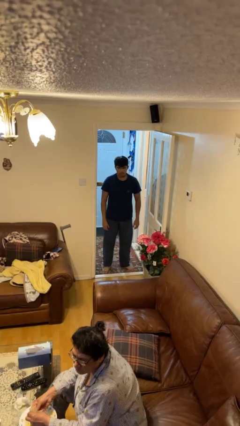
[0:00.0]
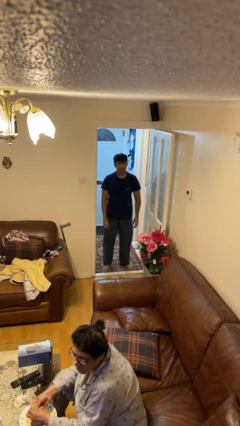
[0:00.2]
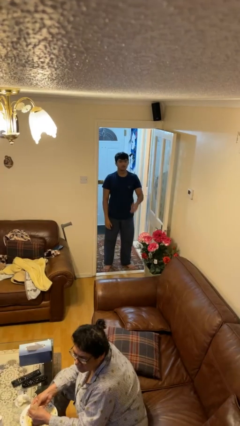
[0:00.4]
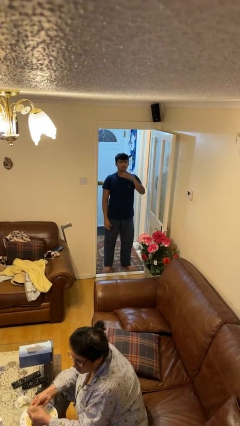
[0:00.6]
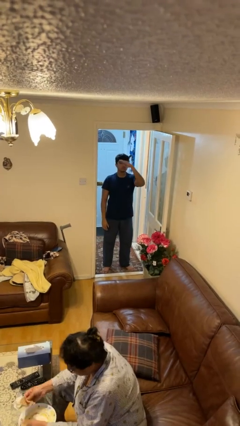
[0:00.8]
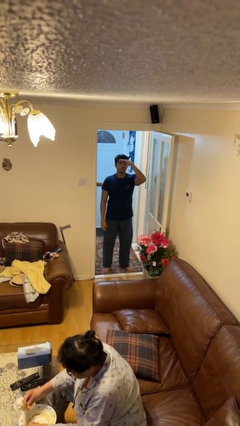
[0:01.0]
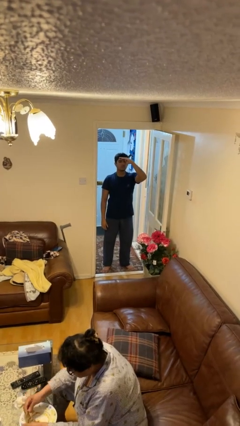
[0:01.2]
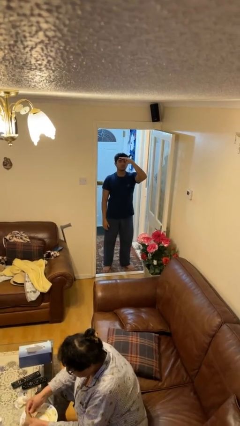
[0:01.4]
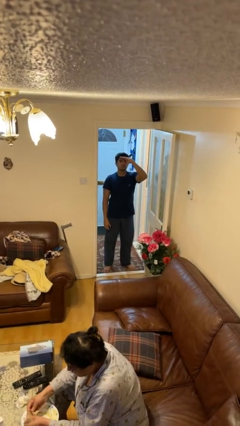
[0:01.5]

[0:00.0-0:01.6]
person salutes

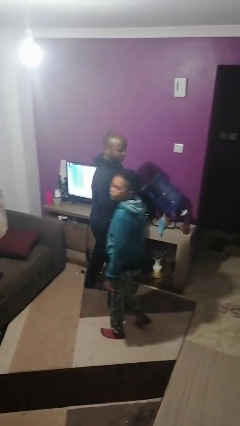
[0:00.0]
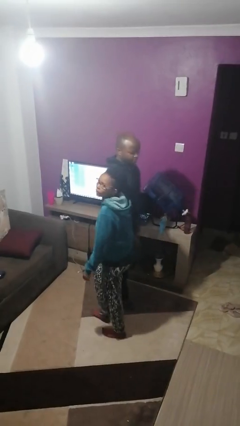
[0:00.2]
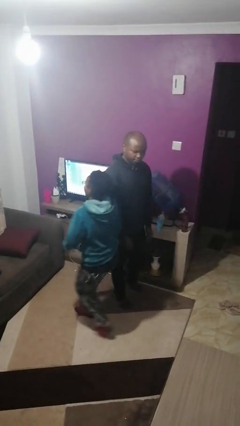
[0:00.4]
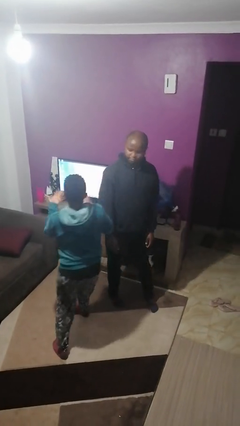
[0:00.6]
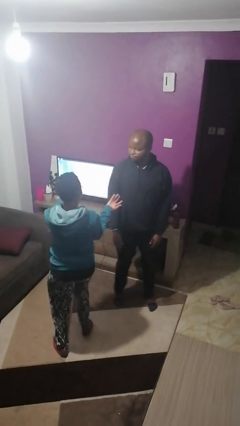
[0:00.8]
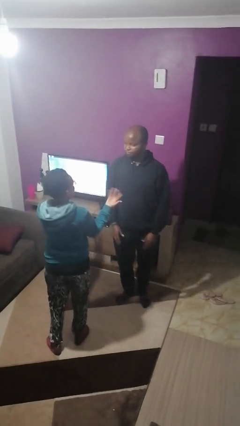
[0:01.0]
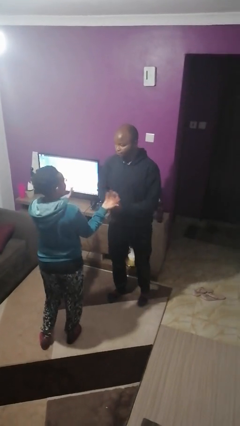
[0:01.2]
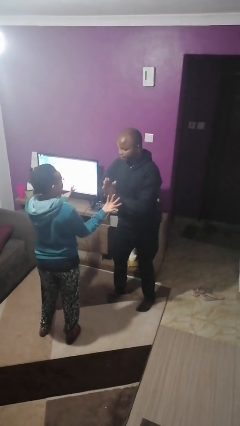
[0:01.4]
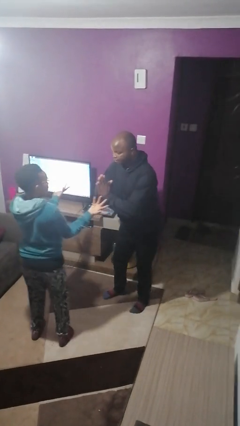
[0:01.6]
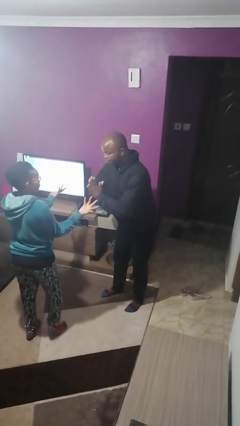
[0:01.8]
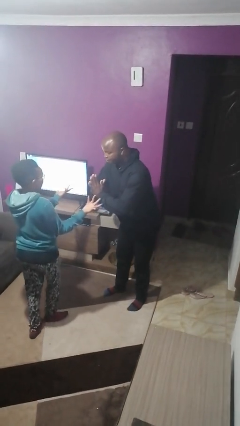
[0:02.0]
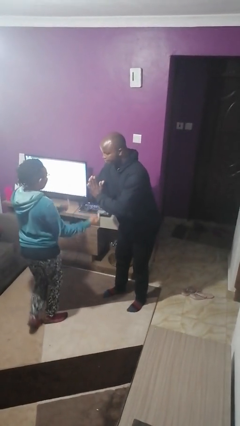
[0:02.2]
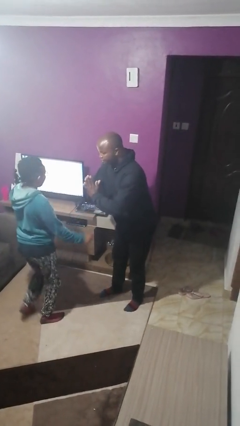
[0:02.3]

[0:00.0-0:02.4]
person bumps into person

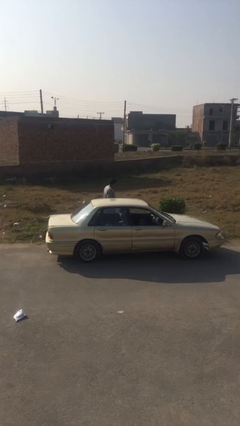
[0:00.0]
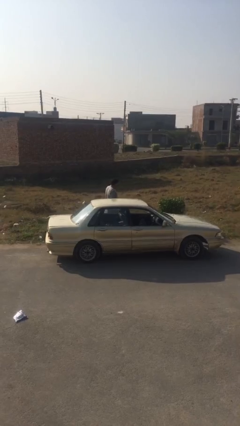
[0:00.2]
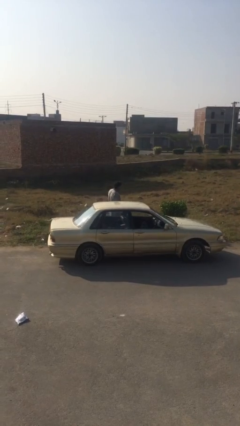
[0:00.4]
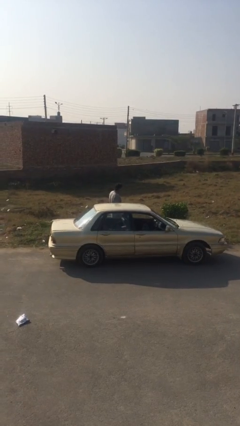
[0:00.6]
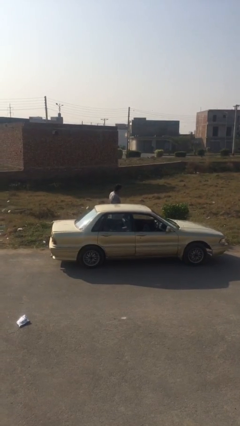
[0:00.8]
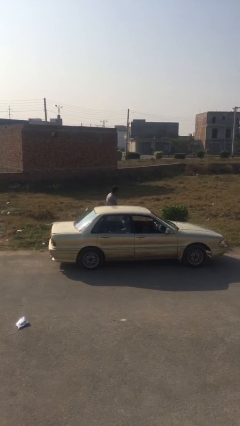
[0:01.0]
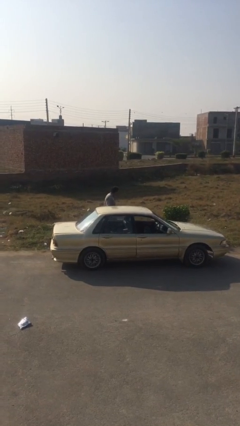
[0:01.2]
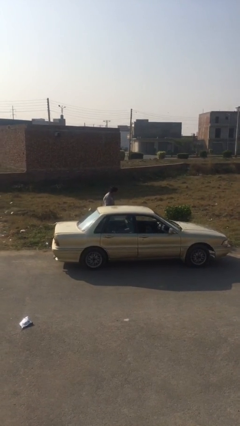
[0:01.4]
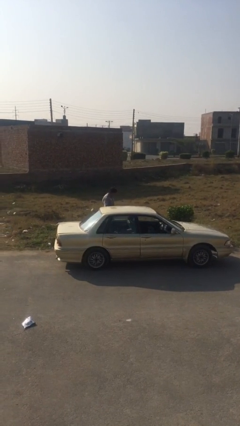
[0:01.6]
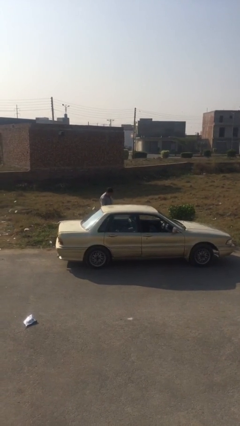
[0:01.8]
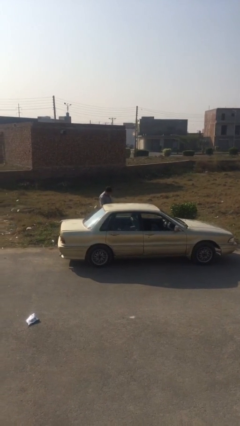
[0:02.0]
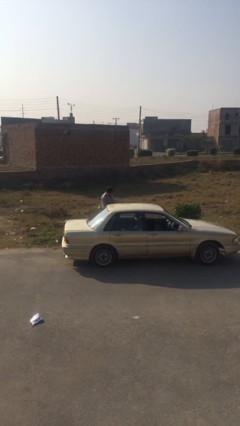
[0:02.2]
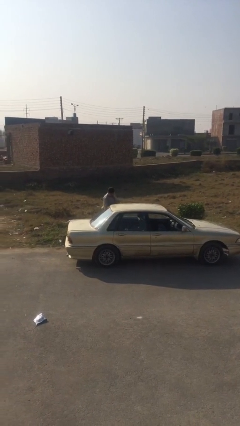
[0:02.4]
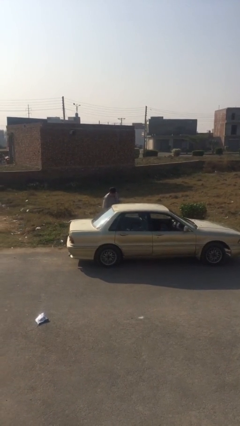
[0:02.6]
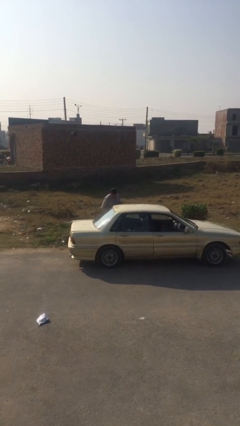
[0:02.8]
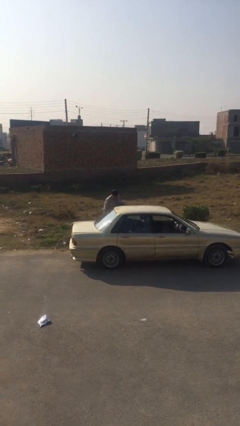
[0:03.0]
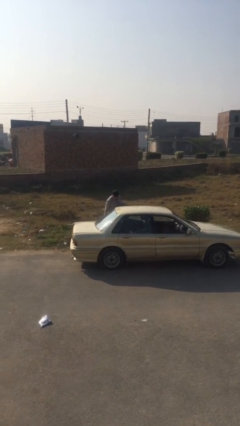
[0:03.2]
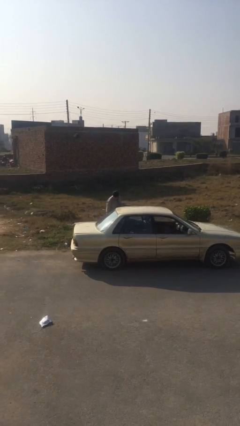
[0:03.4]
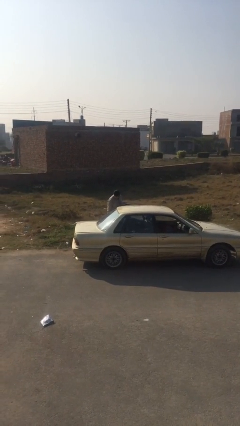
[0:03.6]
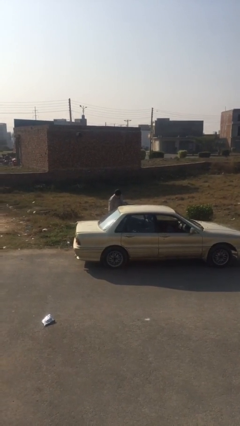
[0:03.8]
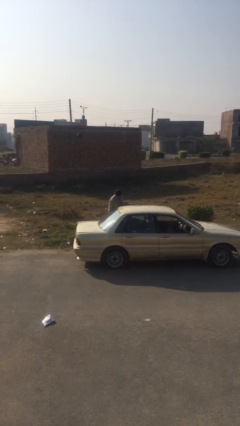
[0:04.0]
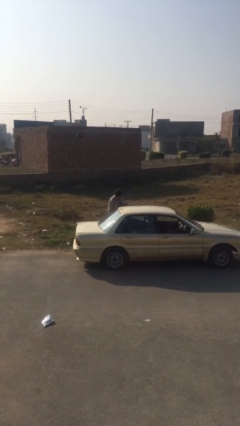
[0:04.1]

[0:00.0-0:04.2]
person opens car door

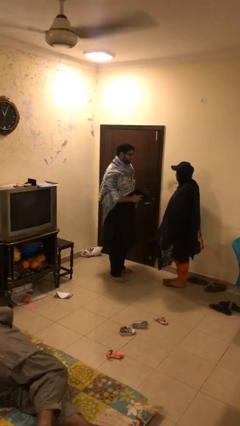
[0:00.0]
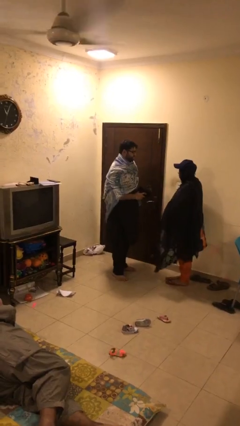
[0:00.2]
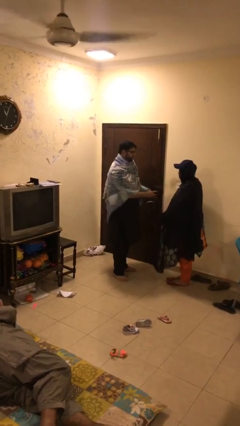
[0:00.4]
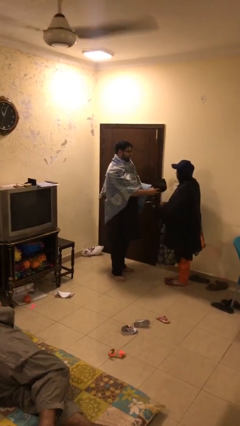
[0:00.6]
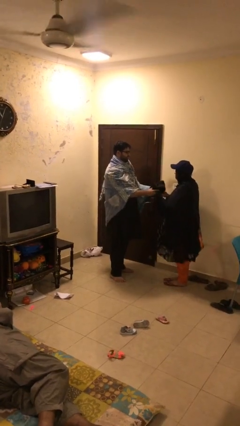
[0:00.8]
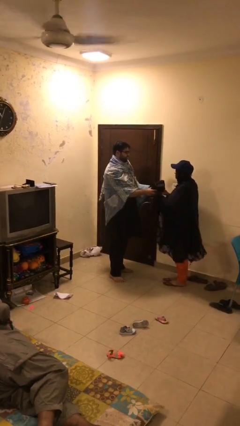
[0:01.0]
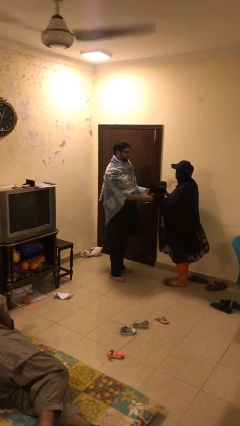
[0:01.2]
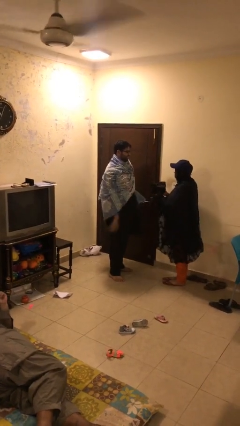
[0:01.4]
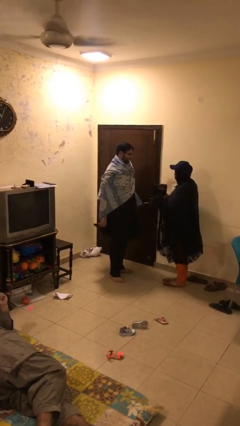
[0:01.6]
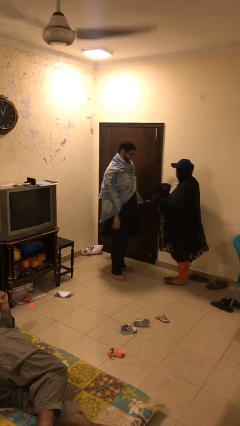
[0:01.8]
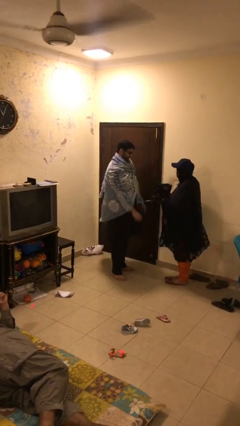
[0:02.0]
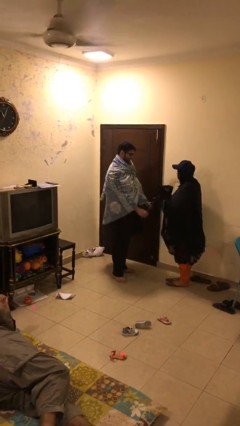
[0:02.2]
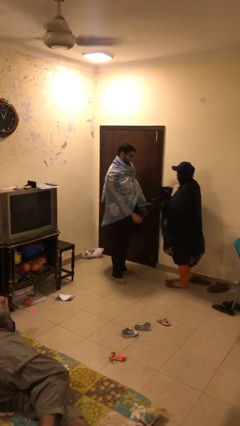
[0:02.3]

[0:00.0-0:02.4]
person transfers object to person

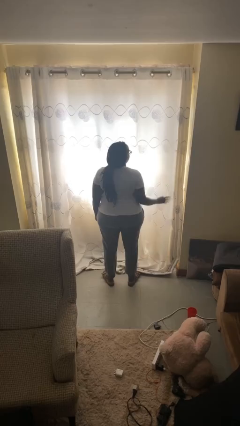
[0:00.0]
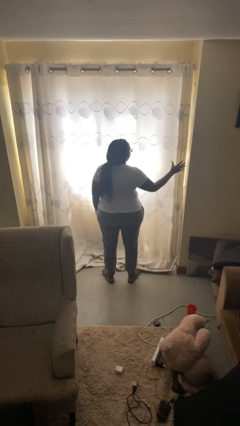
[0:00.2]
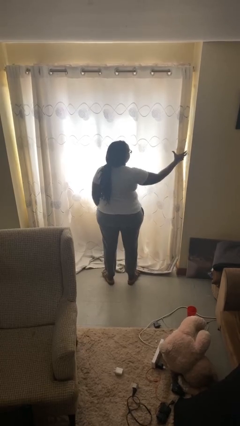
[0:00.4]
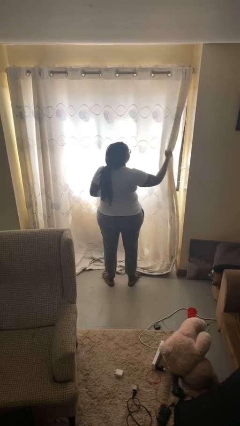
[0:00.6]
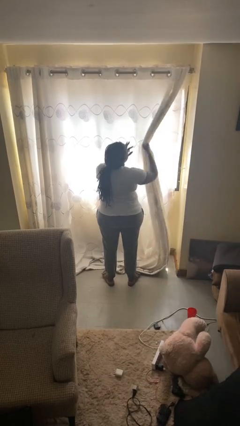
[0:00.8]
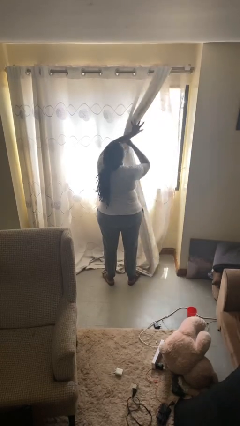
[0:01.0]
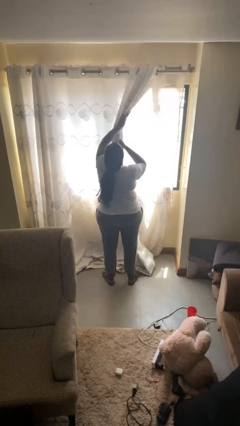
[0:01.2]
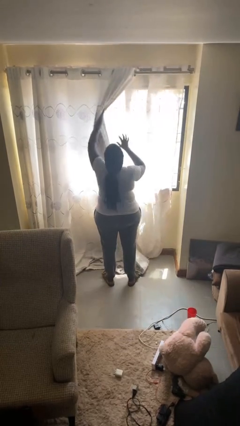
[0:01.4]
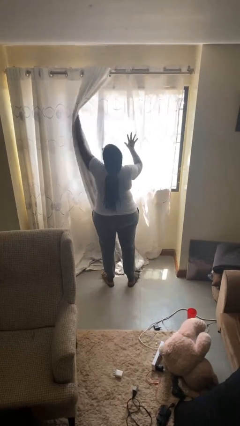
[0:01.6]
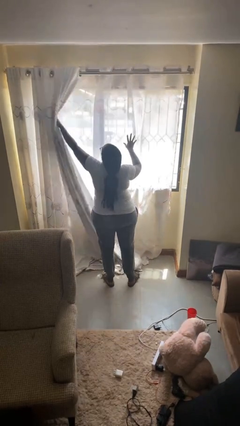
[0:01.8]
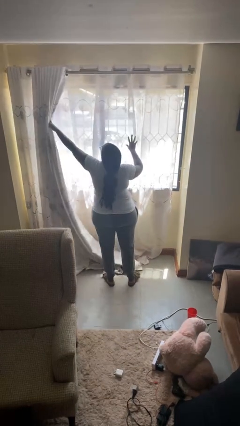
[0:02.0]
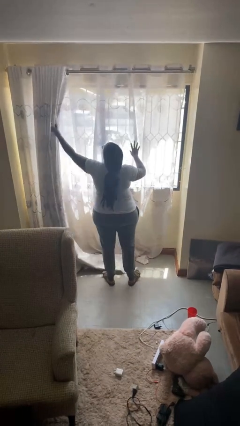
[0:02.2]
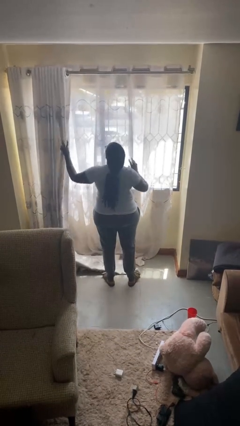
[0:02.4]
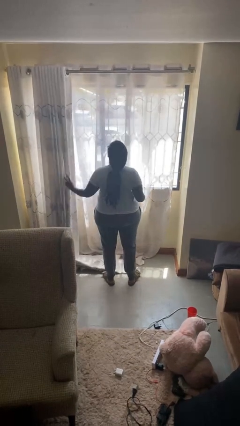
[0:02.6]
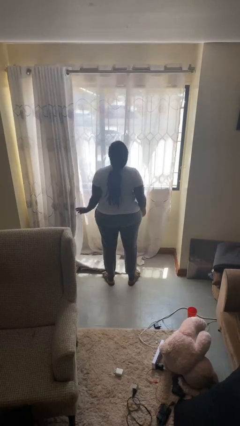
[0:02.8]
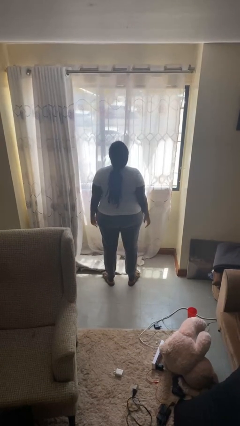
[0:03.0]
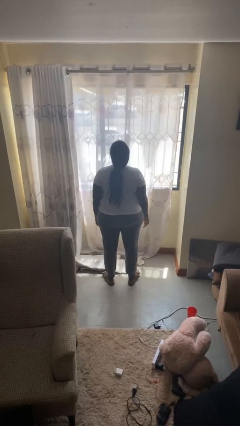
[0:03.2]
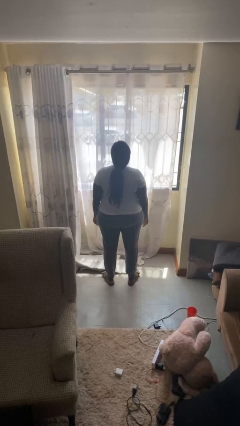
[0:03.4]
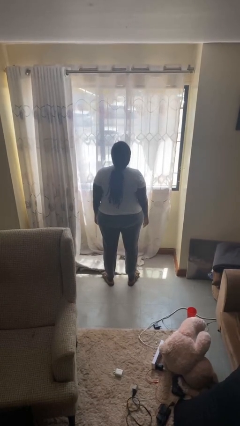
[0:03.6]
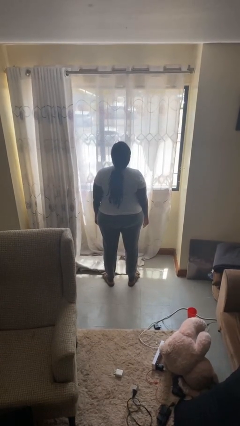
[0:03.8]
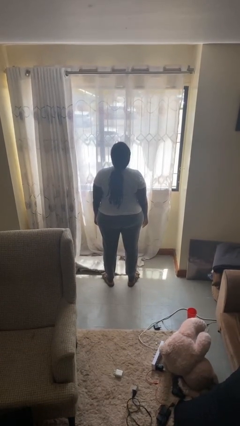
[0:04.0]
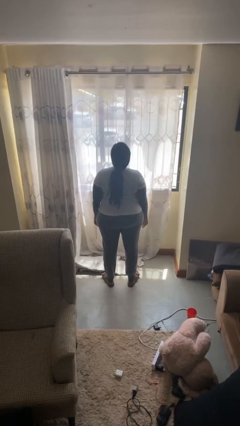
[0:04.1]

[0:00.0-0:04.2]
person opens curtains

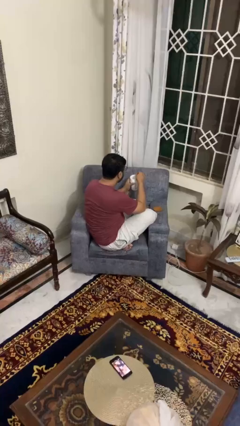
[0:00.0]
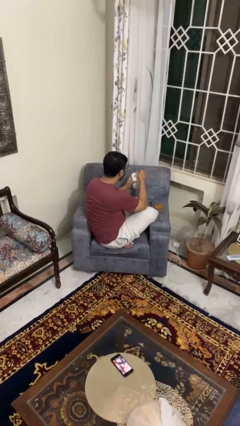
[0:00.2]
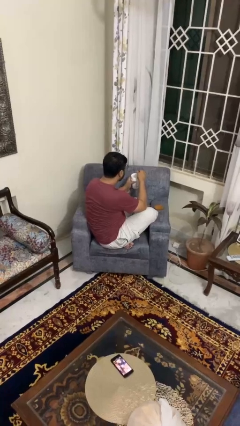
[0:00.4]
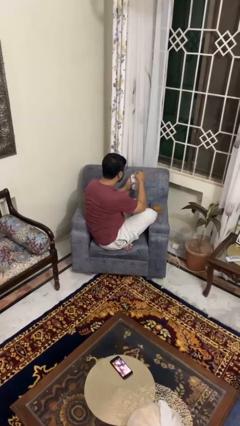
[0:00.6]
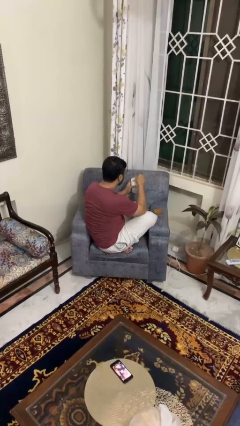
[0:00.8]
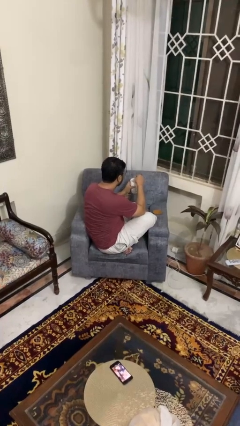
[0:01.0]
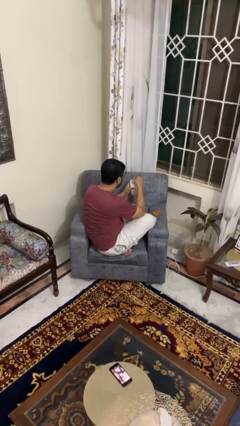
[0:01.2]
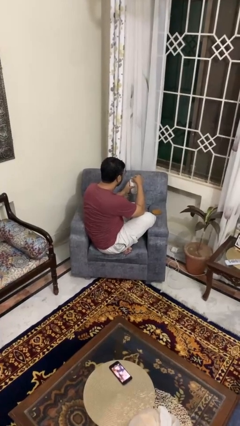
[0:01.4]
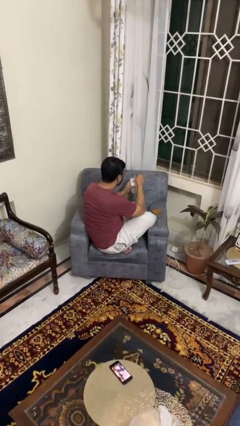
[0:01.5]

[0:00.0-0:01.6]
person stirs mug

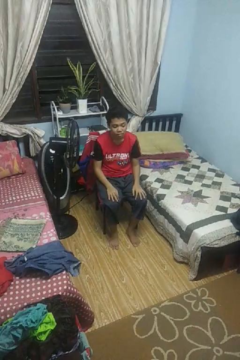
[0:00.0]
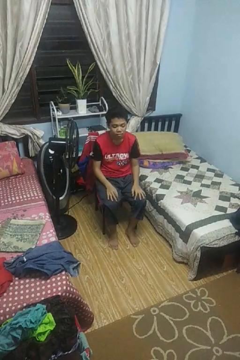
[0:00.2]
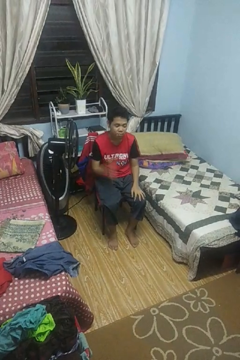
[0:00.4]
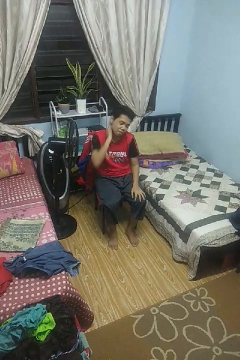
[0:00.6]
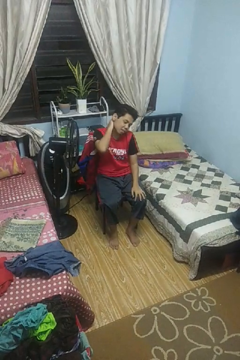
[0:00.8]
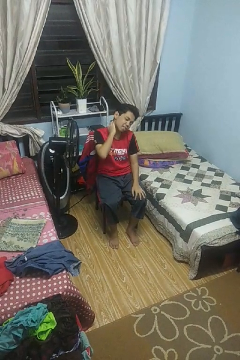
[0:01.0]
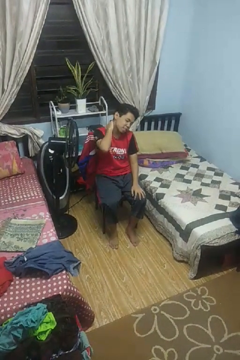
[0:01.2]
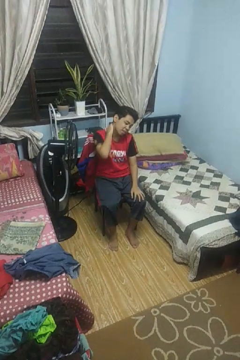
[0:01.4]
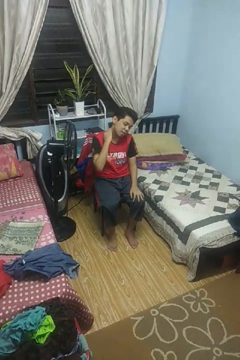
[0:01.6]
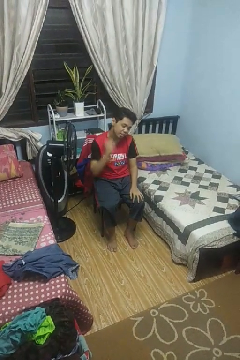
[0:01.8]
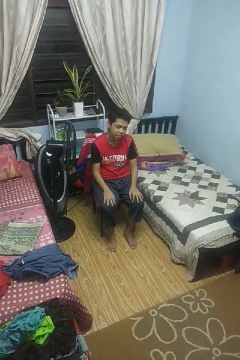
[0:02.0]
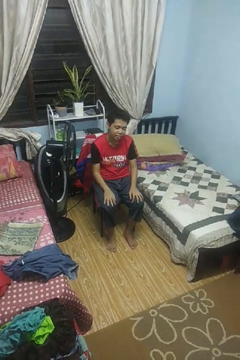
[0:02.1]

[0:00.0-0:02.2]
person rubs neck
